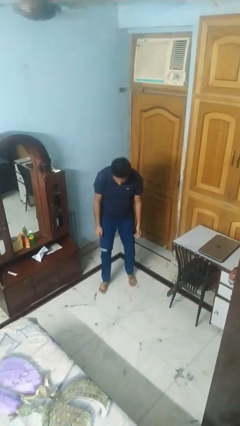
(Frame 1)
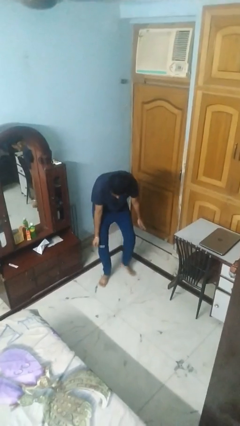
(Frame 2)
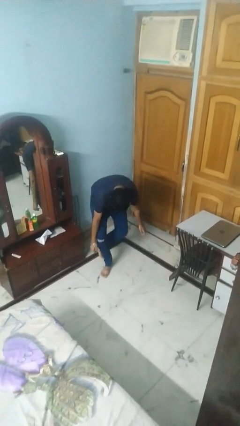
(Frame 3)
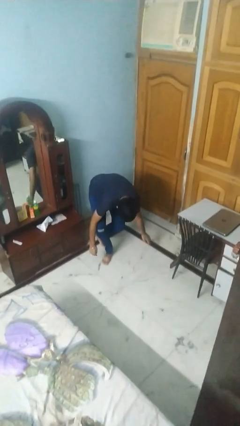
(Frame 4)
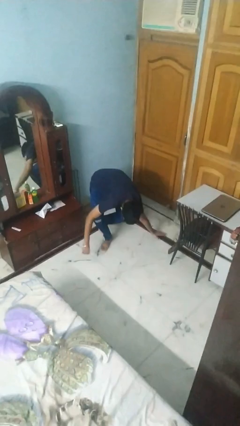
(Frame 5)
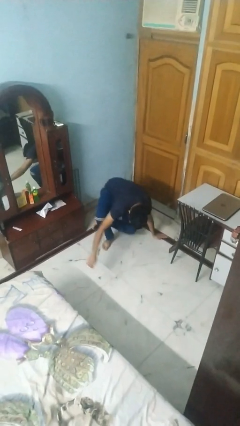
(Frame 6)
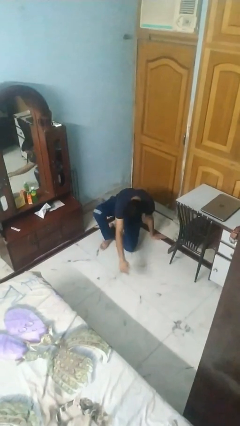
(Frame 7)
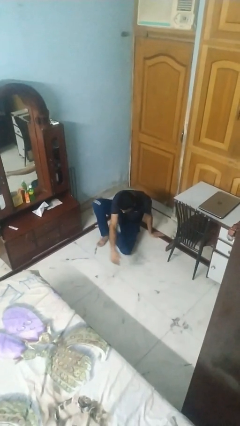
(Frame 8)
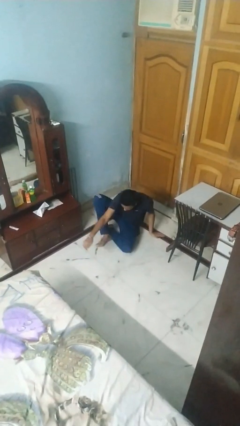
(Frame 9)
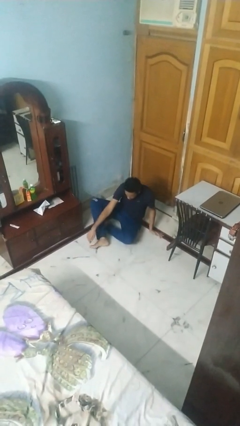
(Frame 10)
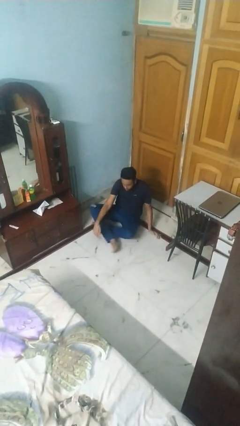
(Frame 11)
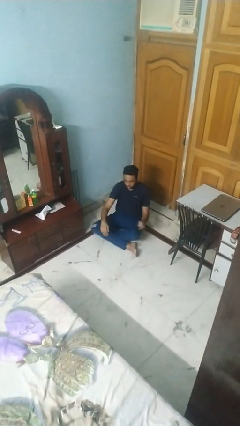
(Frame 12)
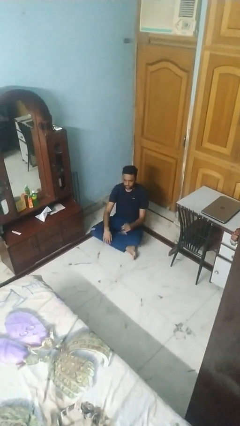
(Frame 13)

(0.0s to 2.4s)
person sits crisscross

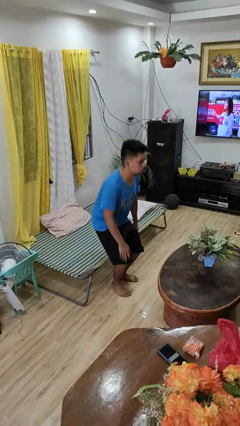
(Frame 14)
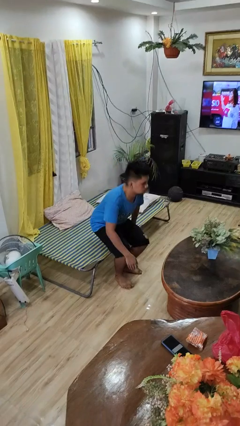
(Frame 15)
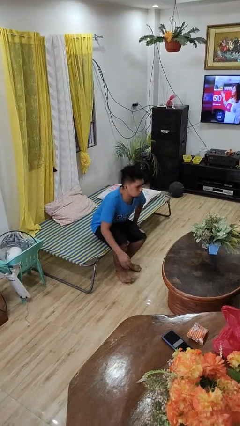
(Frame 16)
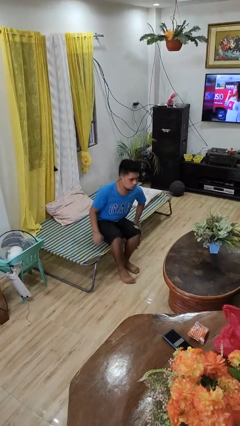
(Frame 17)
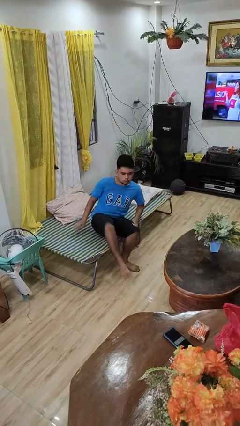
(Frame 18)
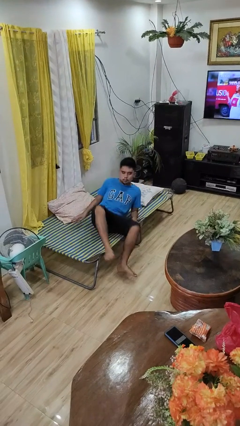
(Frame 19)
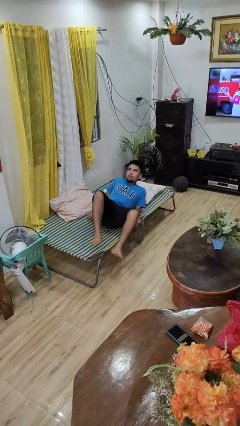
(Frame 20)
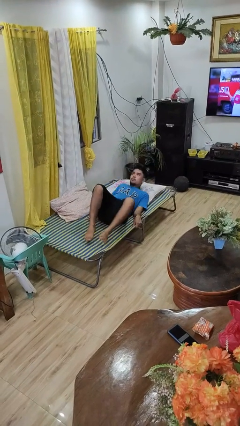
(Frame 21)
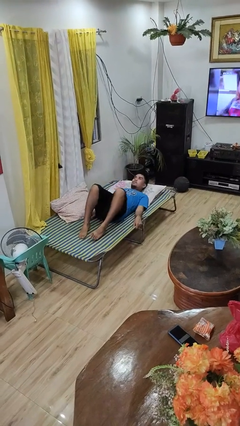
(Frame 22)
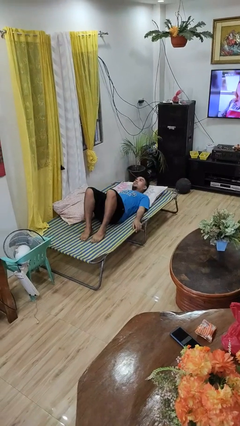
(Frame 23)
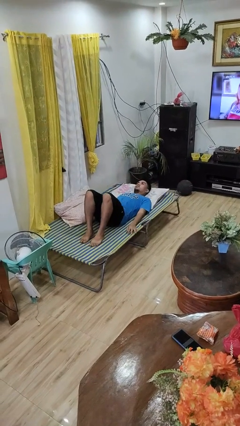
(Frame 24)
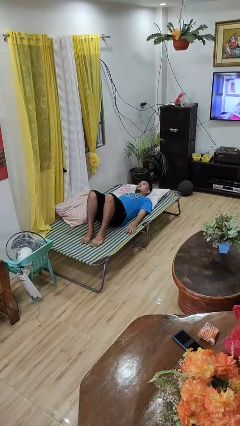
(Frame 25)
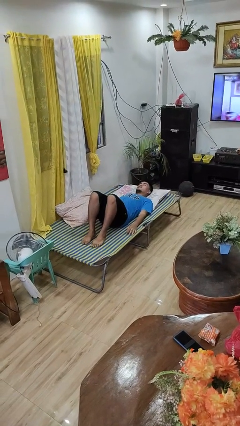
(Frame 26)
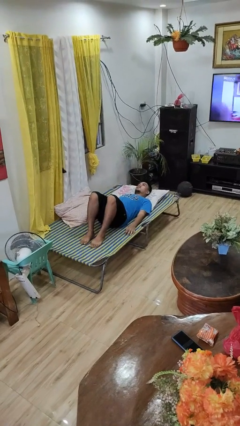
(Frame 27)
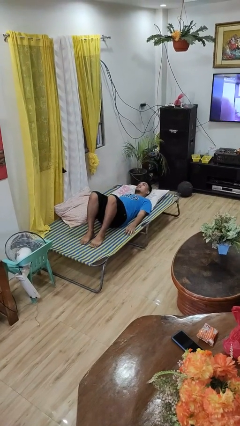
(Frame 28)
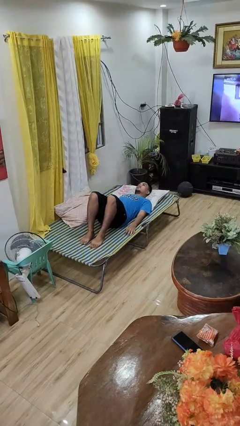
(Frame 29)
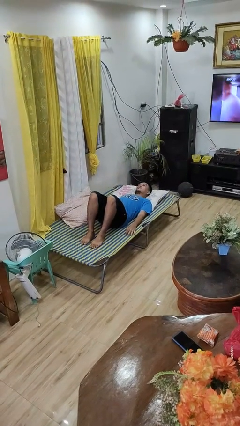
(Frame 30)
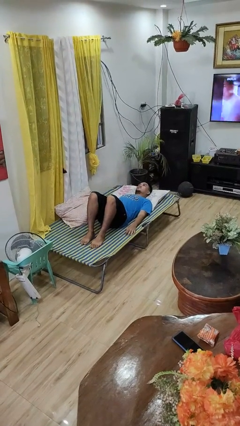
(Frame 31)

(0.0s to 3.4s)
person lies down on bed

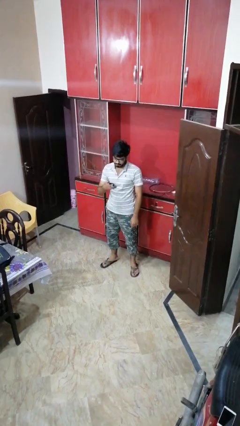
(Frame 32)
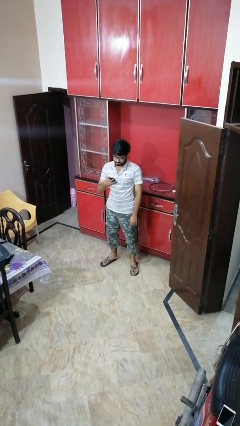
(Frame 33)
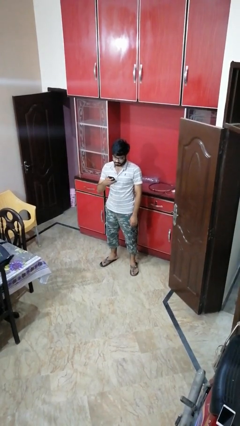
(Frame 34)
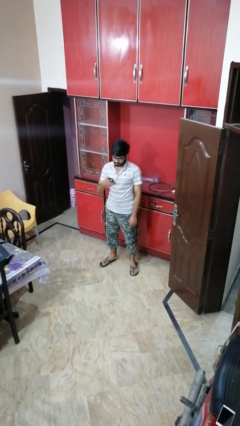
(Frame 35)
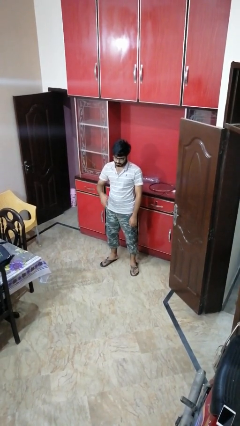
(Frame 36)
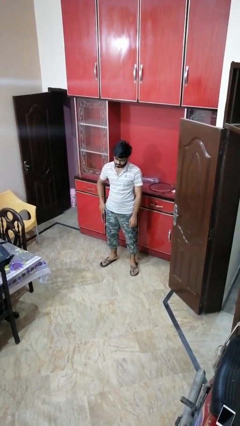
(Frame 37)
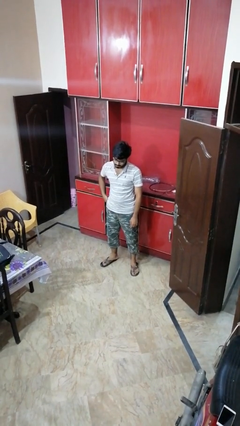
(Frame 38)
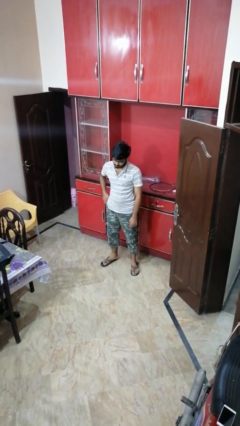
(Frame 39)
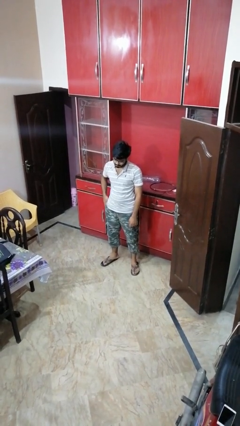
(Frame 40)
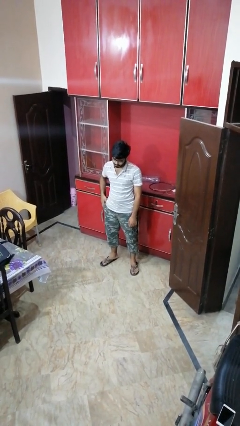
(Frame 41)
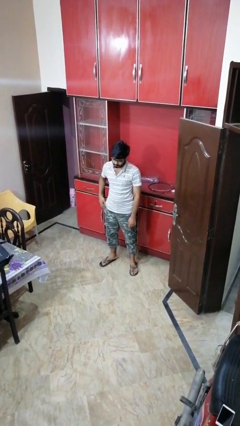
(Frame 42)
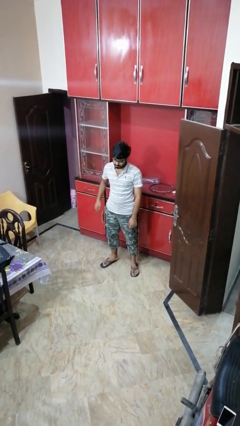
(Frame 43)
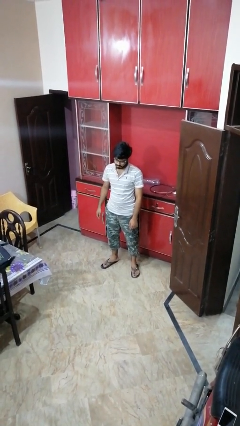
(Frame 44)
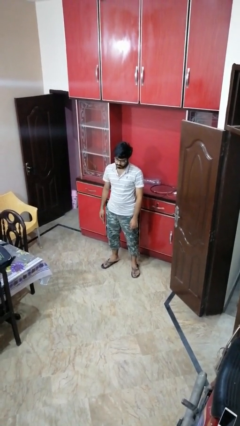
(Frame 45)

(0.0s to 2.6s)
person puts phone into pocket

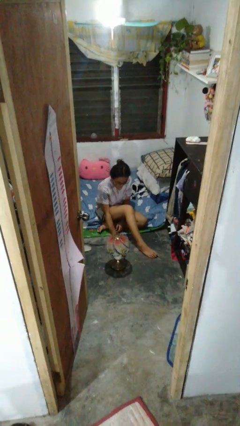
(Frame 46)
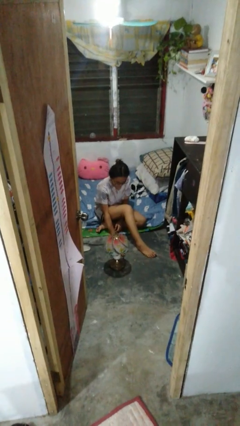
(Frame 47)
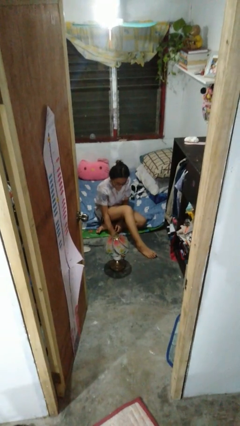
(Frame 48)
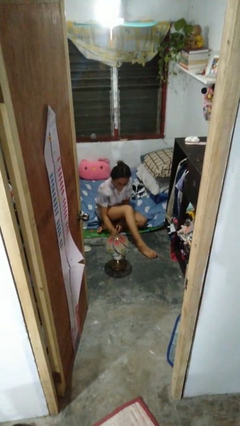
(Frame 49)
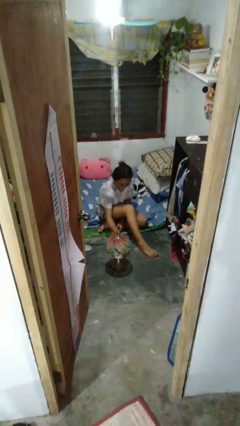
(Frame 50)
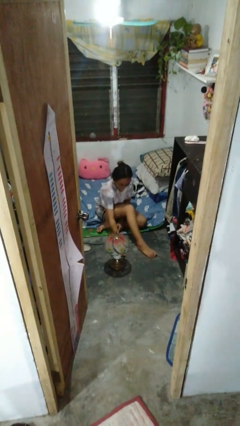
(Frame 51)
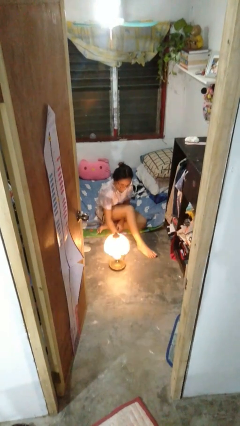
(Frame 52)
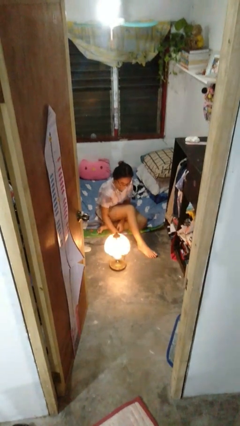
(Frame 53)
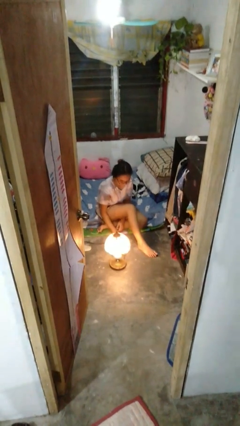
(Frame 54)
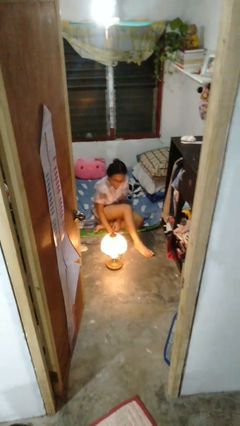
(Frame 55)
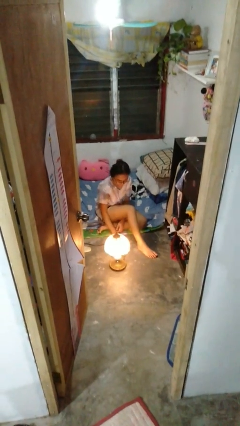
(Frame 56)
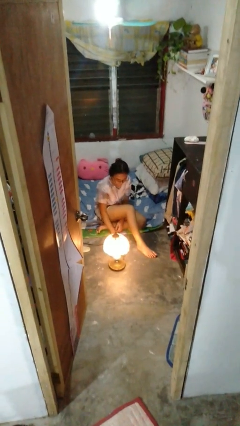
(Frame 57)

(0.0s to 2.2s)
person turns on lamp

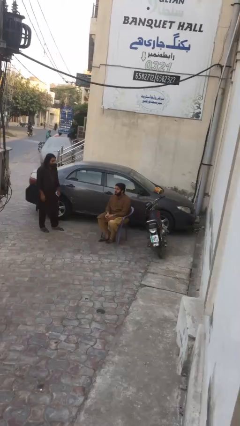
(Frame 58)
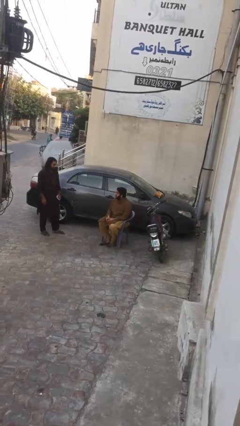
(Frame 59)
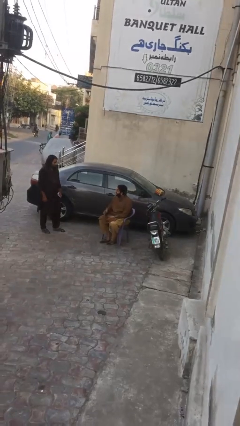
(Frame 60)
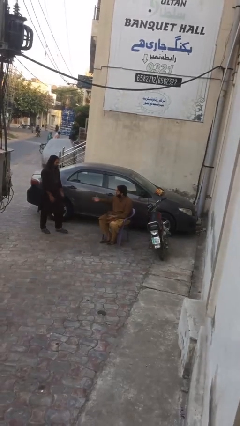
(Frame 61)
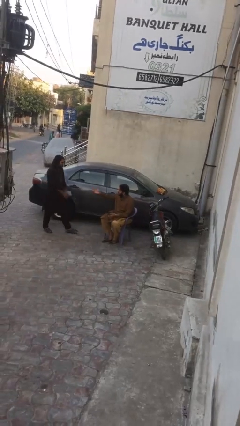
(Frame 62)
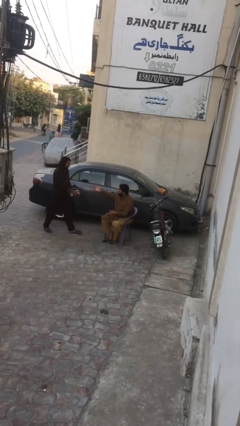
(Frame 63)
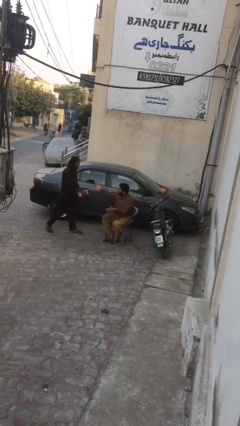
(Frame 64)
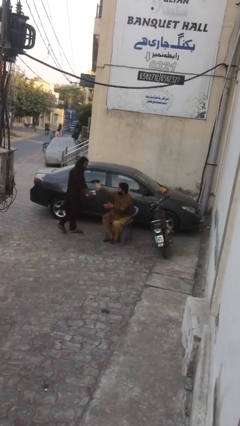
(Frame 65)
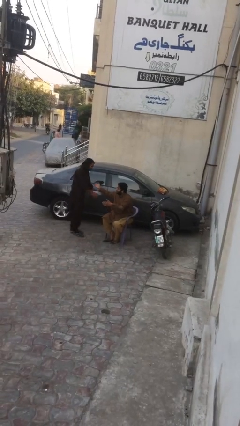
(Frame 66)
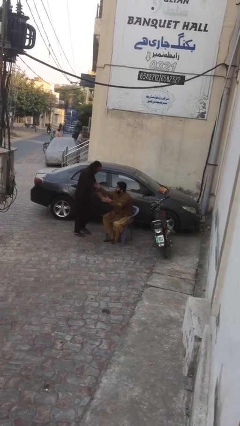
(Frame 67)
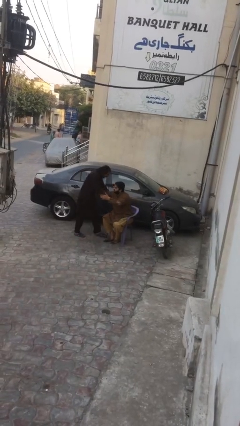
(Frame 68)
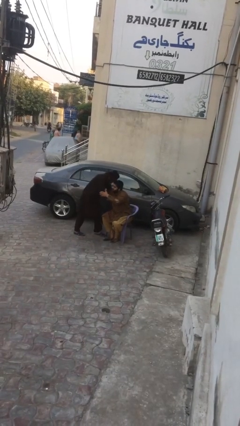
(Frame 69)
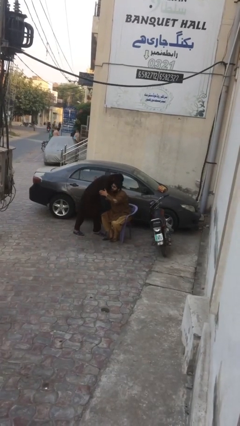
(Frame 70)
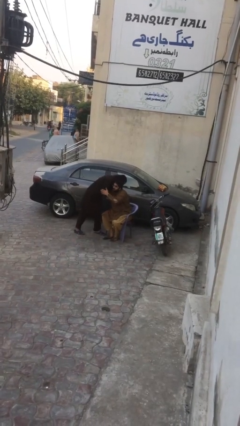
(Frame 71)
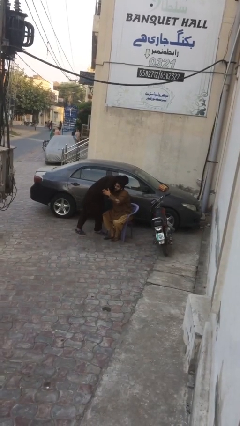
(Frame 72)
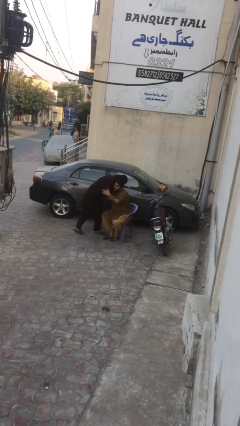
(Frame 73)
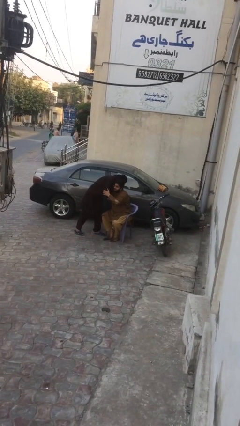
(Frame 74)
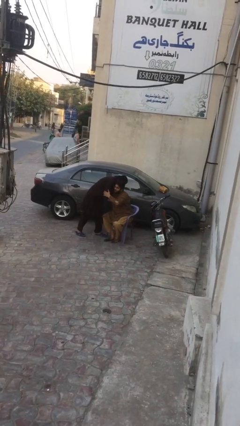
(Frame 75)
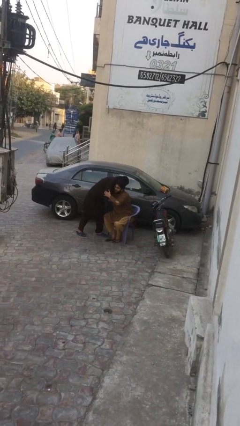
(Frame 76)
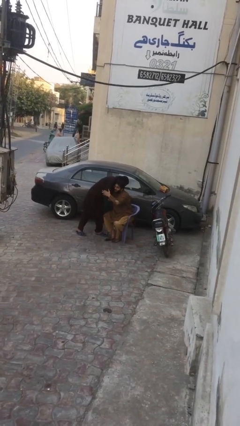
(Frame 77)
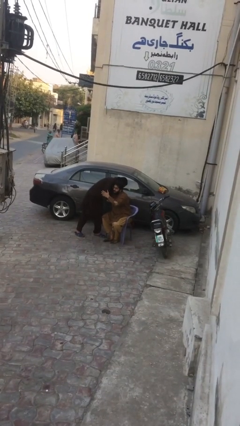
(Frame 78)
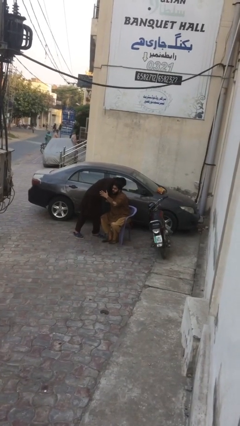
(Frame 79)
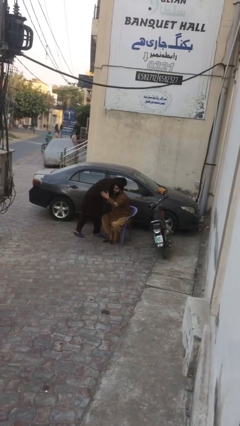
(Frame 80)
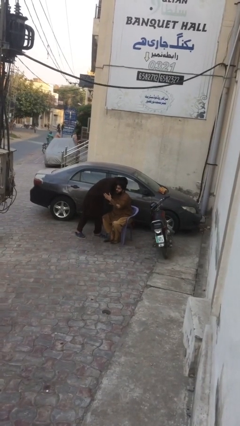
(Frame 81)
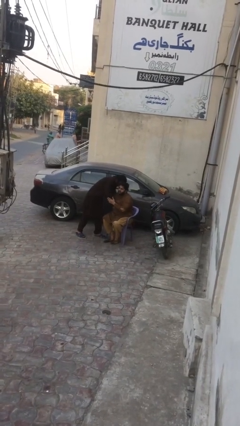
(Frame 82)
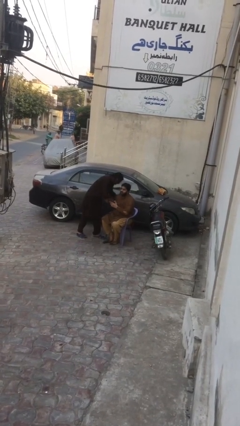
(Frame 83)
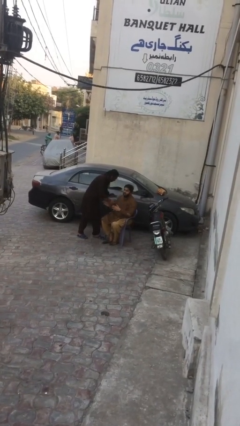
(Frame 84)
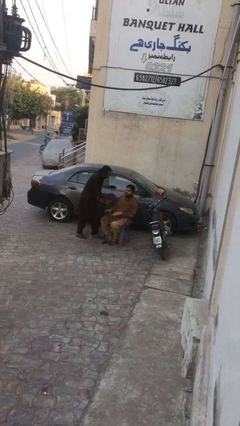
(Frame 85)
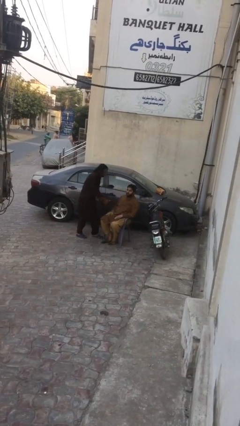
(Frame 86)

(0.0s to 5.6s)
person embraces person

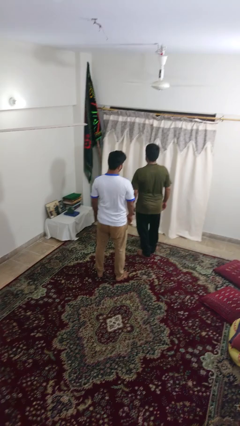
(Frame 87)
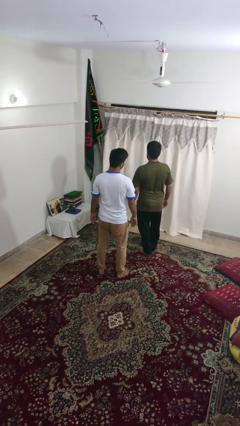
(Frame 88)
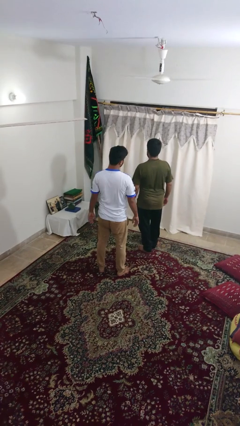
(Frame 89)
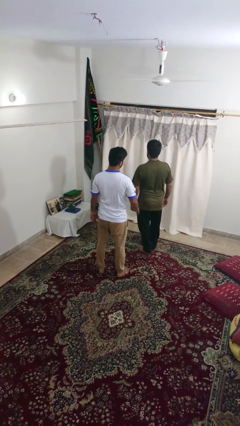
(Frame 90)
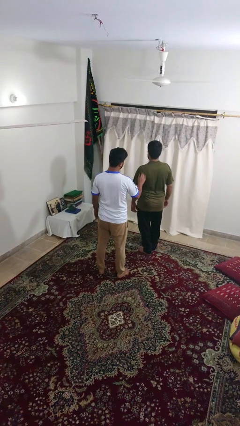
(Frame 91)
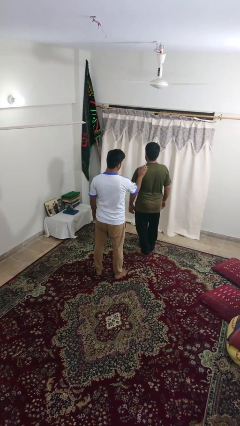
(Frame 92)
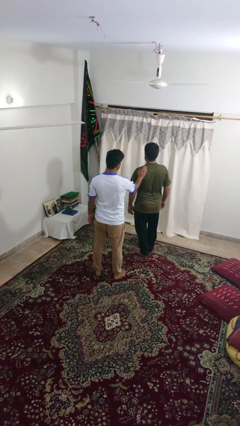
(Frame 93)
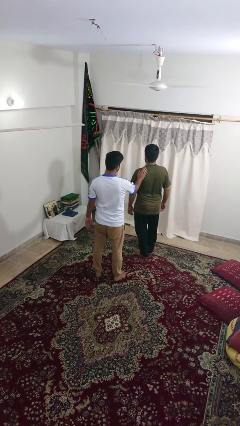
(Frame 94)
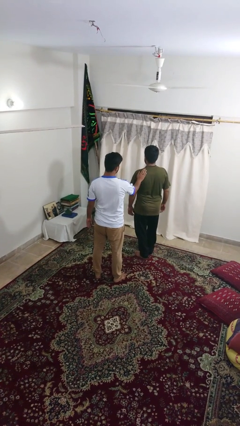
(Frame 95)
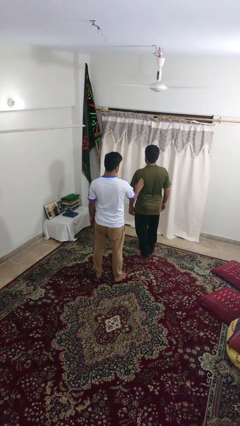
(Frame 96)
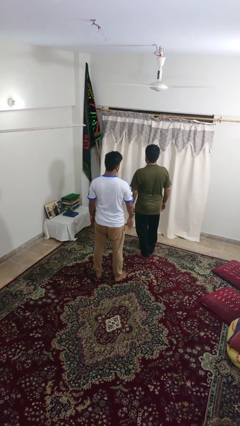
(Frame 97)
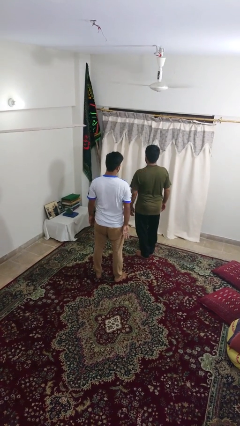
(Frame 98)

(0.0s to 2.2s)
person touches back of person
